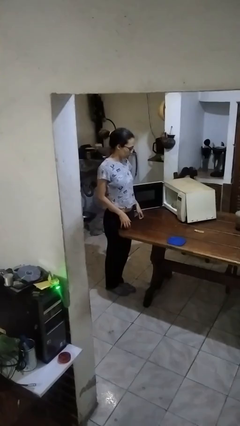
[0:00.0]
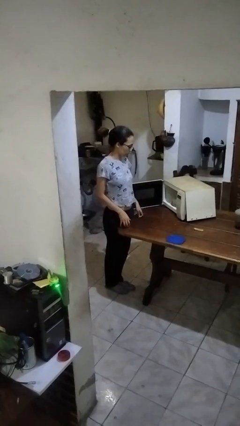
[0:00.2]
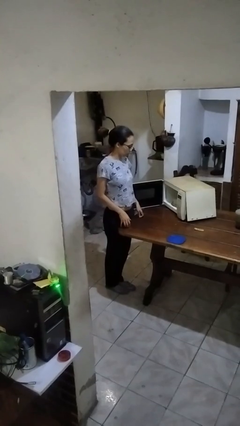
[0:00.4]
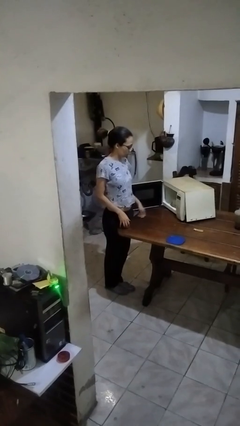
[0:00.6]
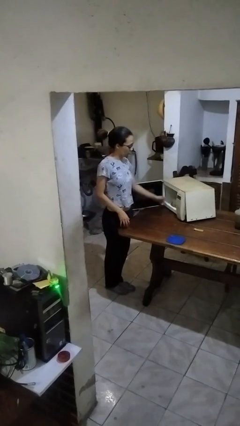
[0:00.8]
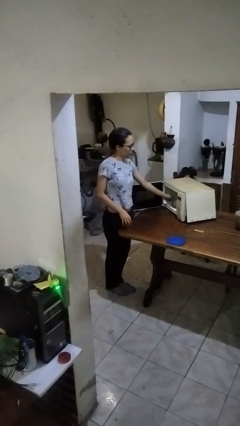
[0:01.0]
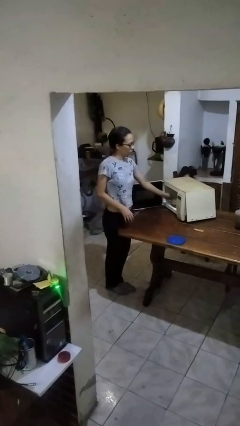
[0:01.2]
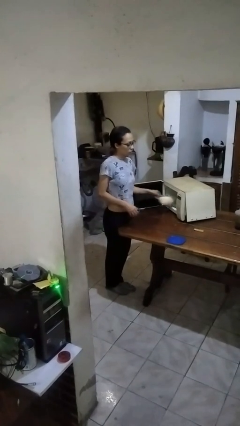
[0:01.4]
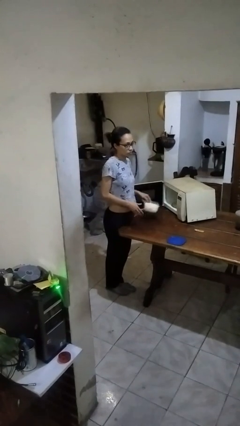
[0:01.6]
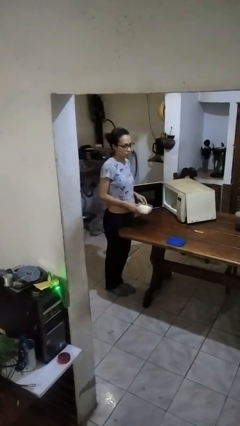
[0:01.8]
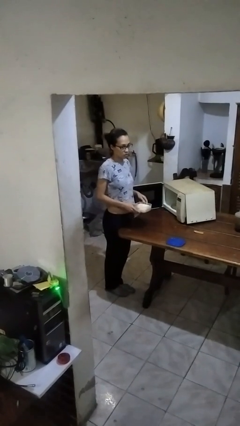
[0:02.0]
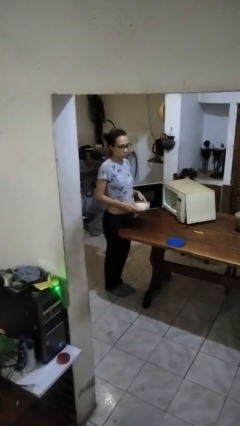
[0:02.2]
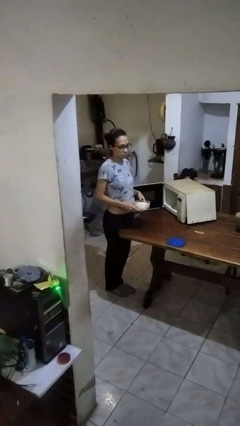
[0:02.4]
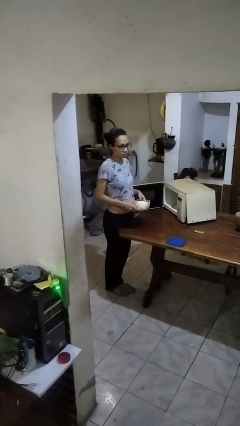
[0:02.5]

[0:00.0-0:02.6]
person takes object from microwave

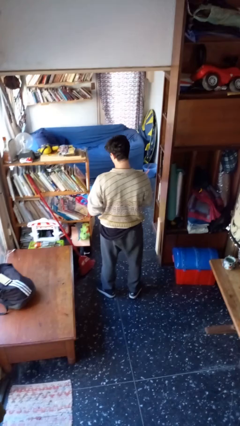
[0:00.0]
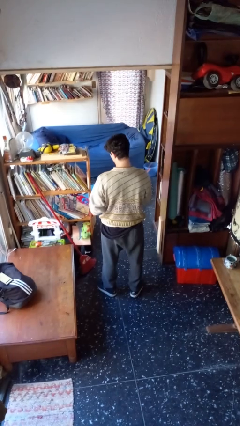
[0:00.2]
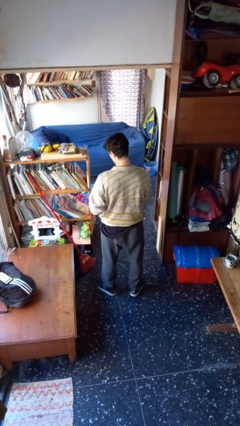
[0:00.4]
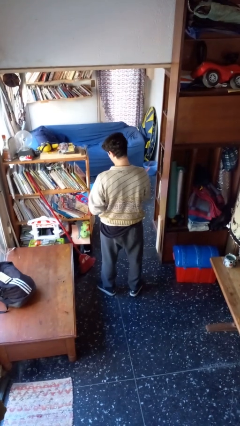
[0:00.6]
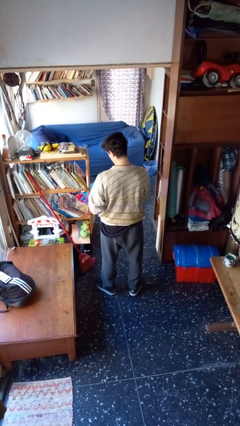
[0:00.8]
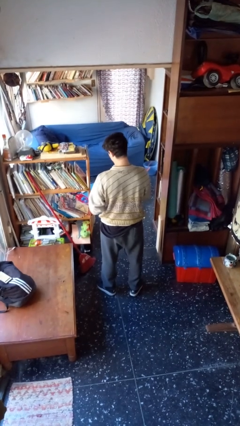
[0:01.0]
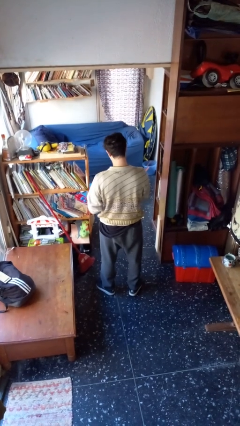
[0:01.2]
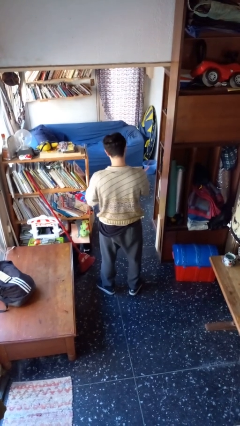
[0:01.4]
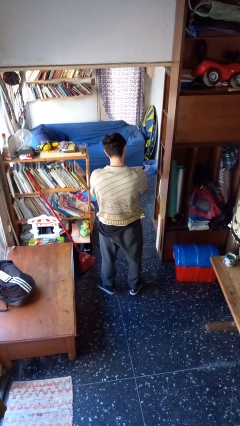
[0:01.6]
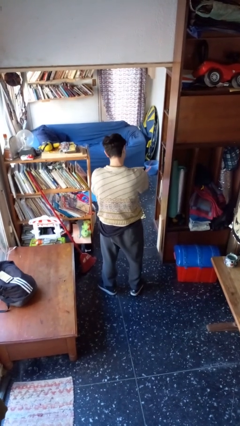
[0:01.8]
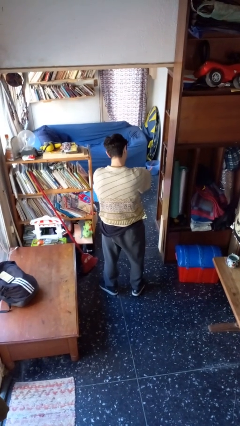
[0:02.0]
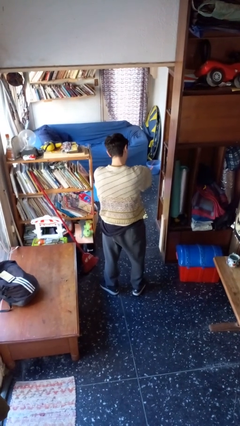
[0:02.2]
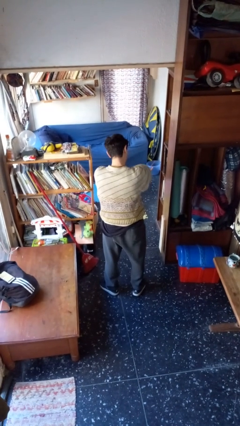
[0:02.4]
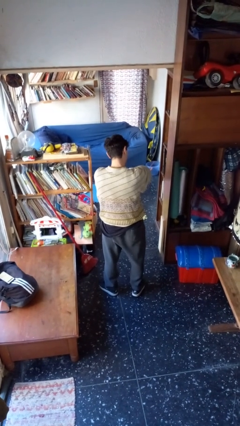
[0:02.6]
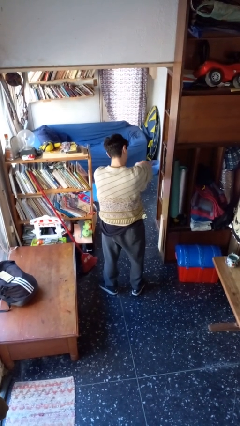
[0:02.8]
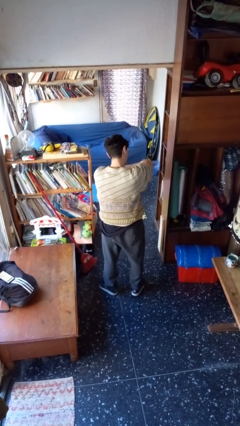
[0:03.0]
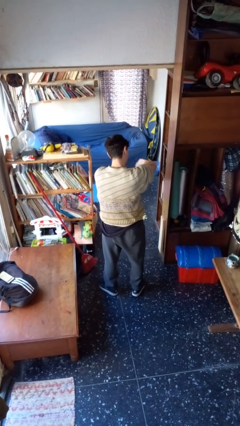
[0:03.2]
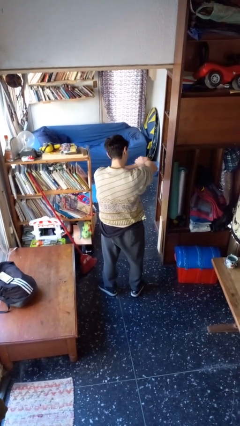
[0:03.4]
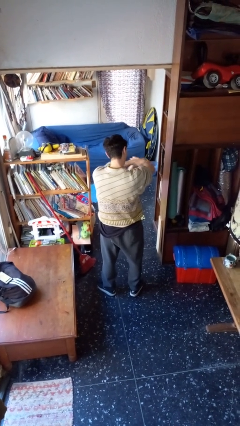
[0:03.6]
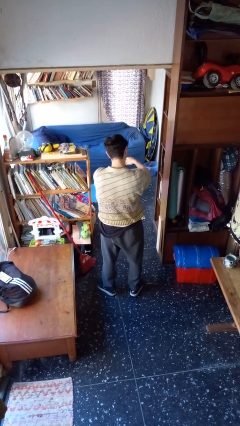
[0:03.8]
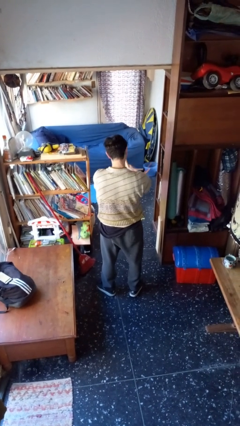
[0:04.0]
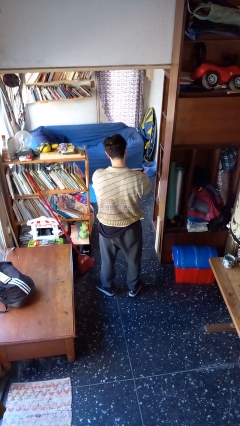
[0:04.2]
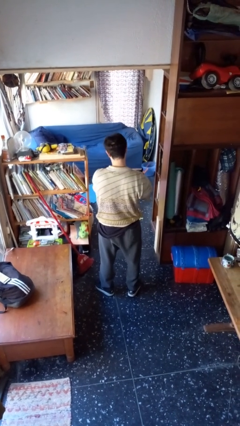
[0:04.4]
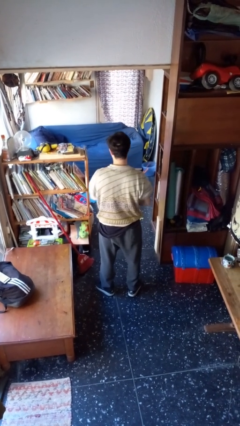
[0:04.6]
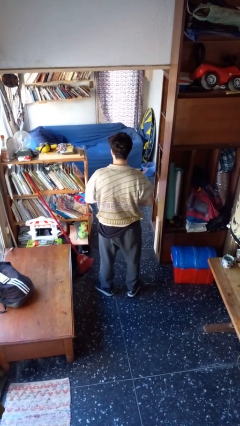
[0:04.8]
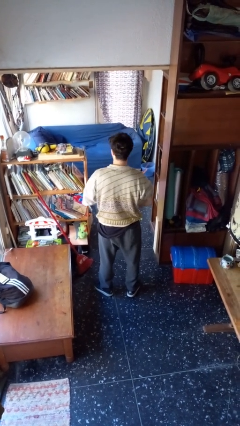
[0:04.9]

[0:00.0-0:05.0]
person applies sunscreen

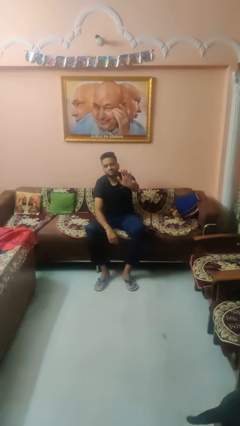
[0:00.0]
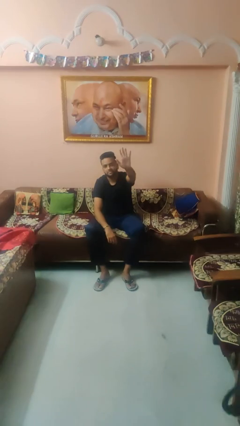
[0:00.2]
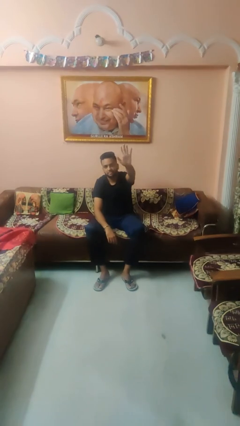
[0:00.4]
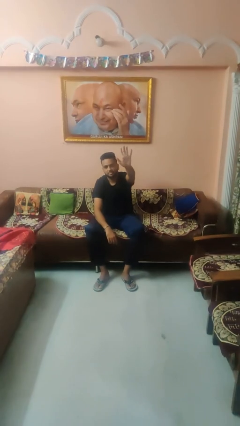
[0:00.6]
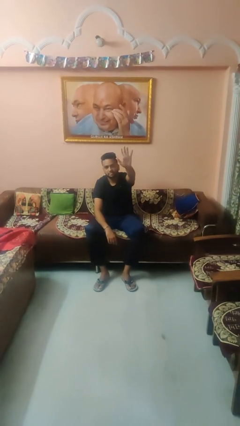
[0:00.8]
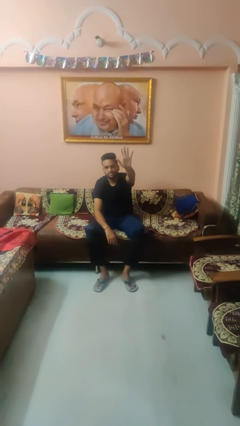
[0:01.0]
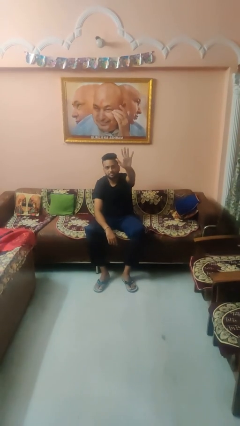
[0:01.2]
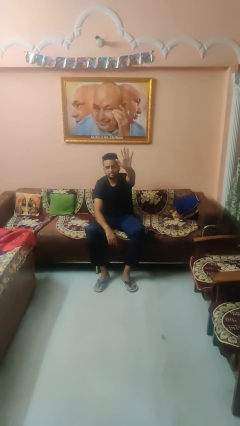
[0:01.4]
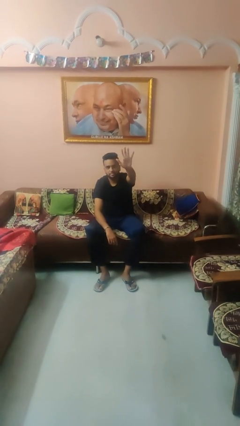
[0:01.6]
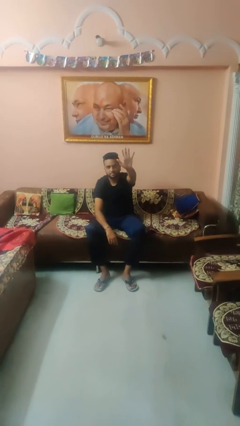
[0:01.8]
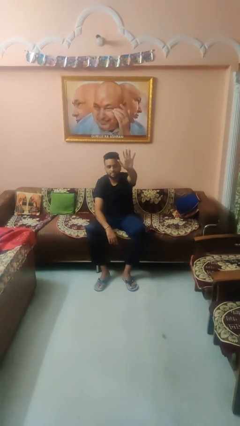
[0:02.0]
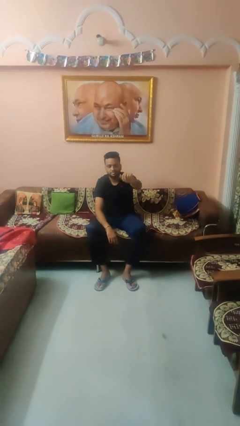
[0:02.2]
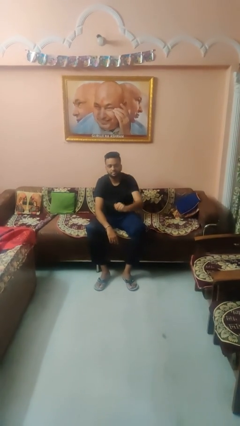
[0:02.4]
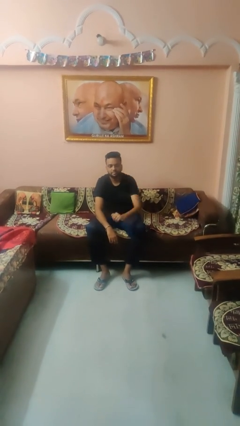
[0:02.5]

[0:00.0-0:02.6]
person gestures number five

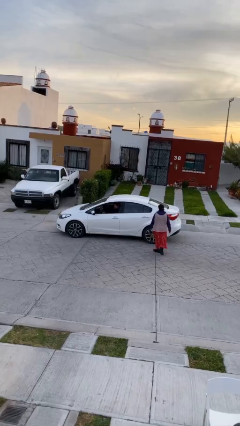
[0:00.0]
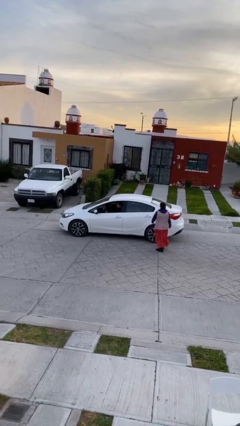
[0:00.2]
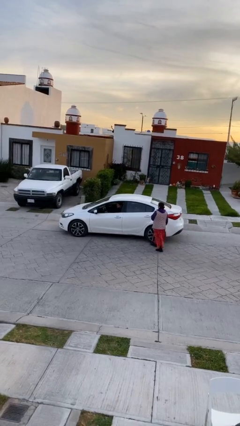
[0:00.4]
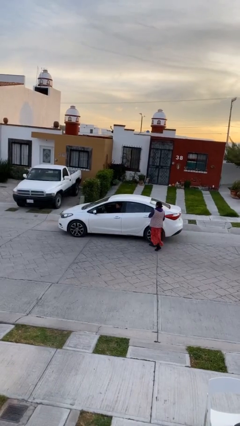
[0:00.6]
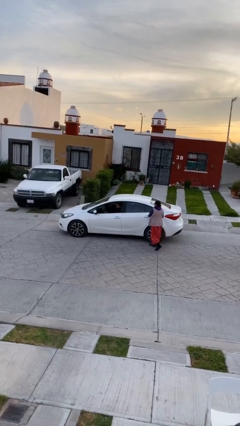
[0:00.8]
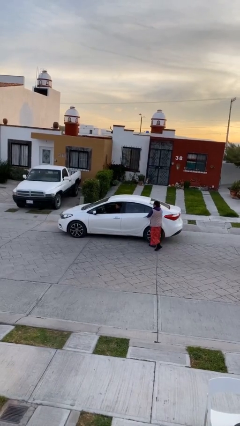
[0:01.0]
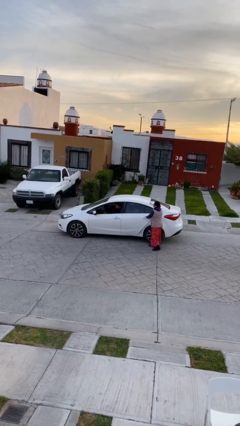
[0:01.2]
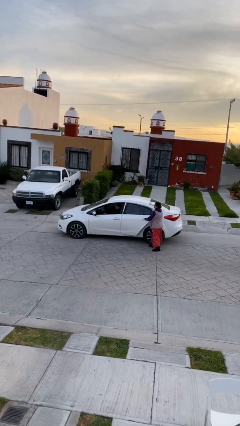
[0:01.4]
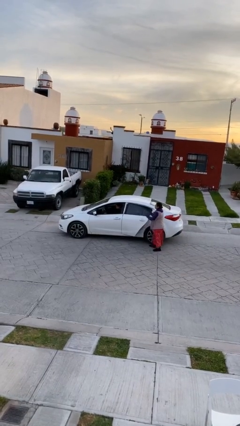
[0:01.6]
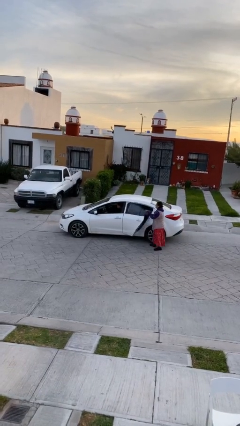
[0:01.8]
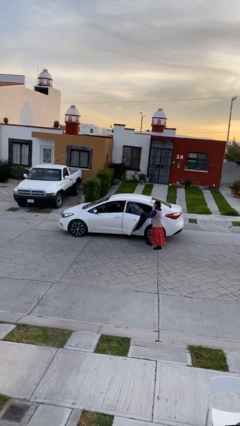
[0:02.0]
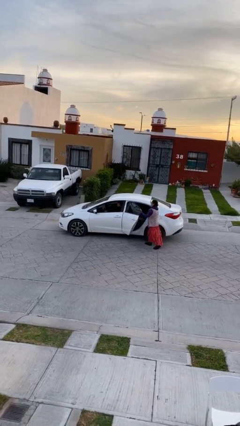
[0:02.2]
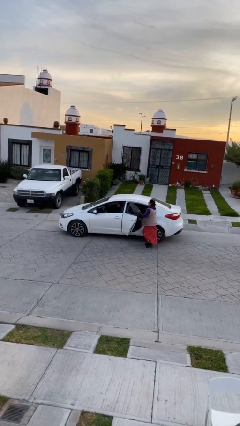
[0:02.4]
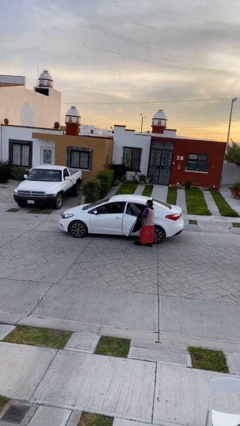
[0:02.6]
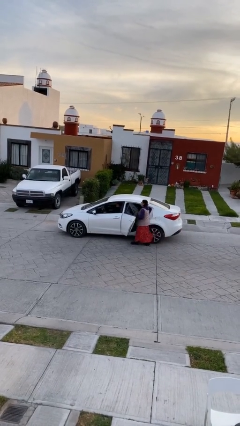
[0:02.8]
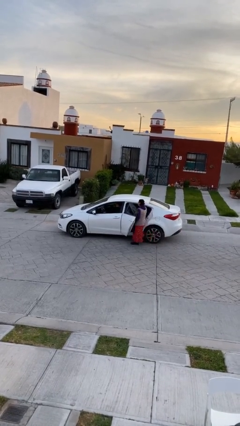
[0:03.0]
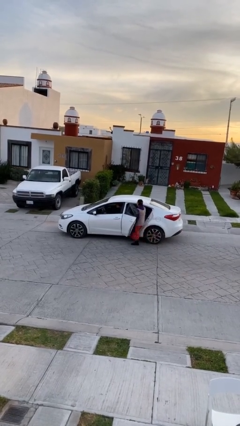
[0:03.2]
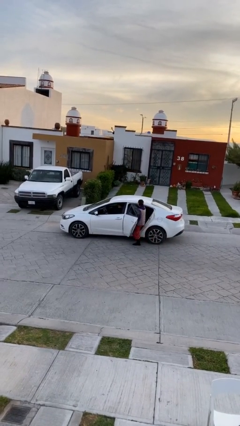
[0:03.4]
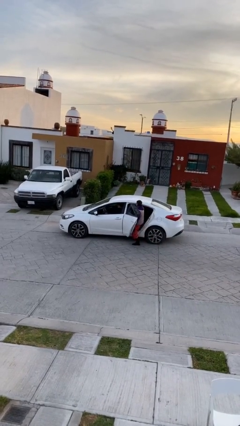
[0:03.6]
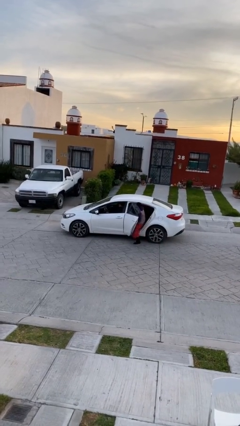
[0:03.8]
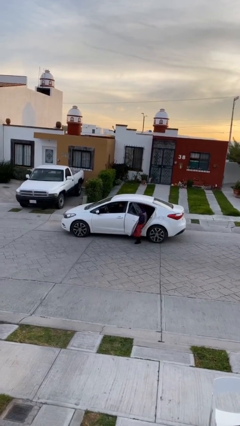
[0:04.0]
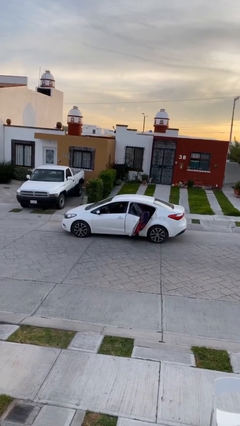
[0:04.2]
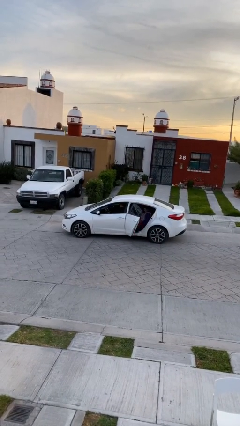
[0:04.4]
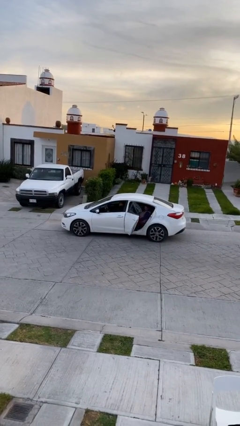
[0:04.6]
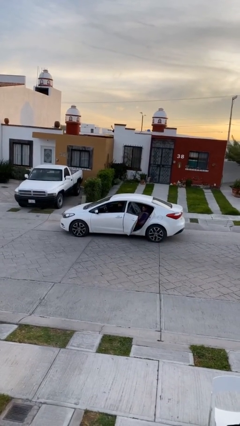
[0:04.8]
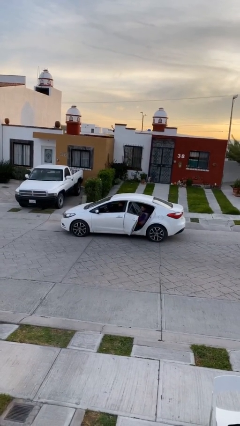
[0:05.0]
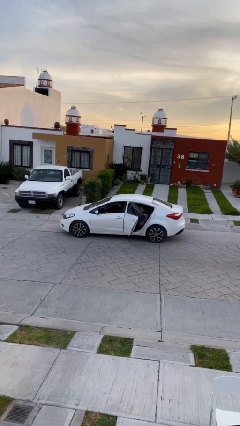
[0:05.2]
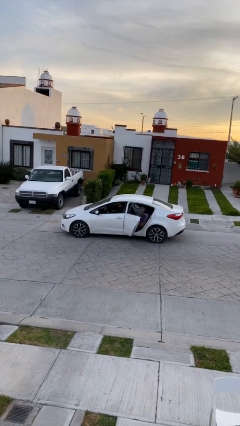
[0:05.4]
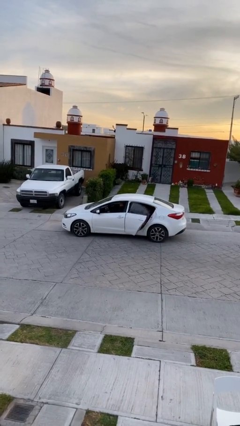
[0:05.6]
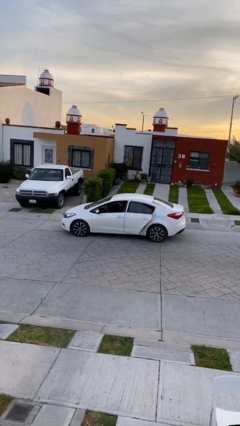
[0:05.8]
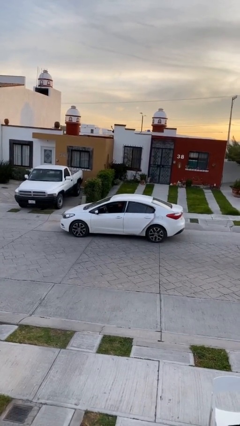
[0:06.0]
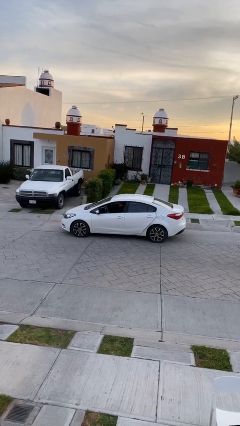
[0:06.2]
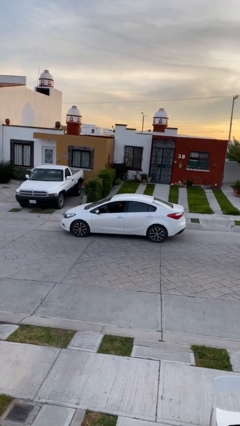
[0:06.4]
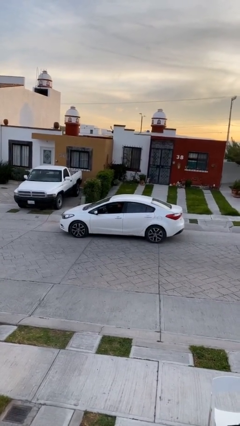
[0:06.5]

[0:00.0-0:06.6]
car picks up person

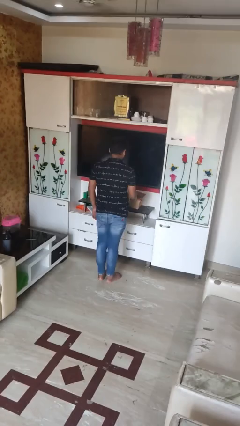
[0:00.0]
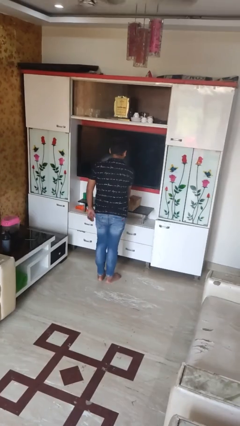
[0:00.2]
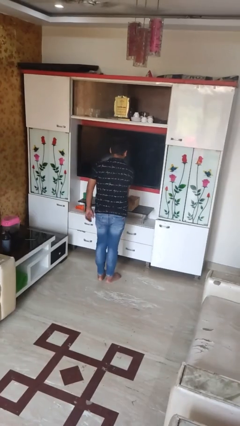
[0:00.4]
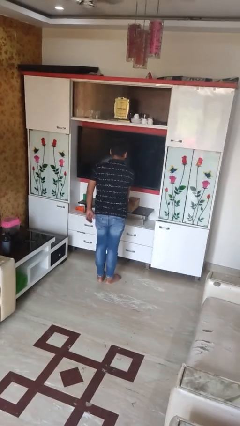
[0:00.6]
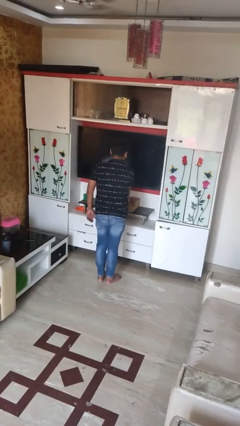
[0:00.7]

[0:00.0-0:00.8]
person puts down object on countertop
